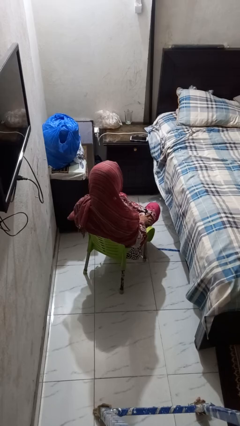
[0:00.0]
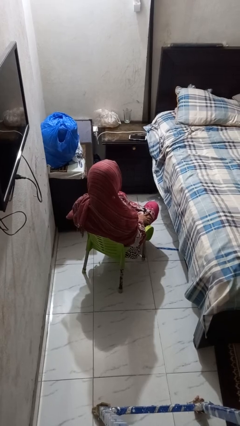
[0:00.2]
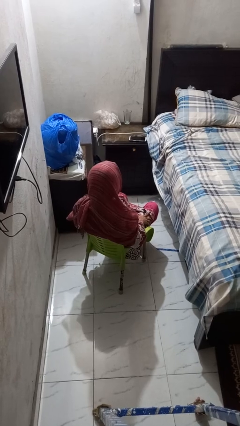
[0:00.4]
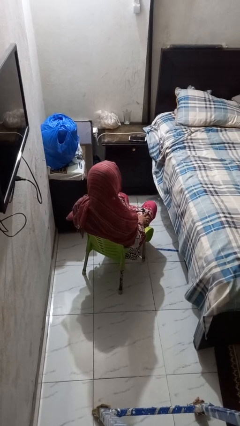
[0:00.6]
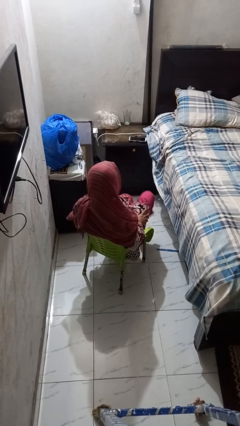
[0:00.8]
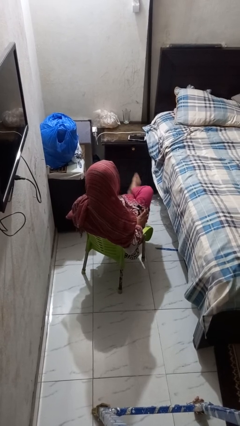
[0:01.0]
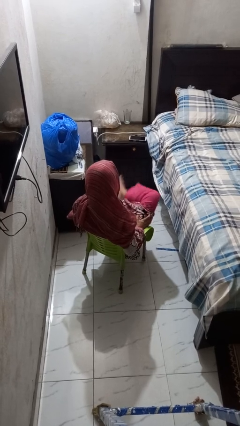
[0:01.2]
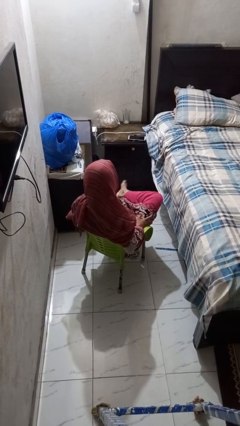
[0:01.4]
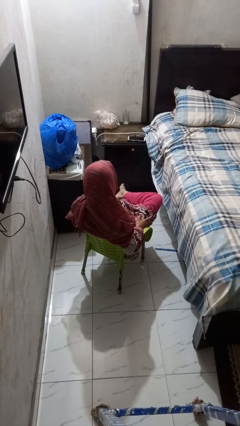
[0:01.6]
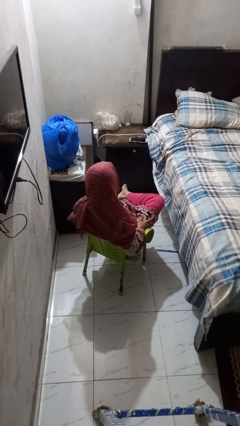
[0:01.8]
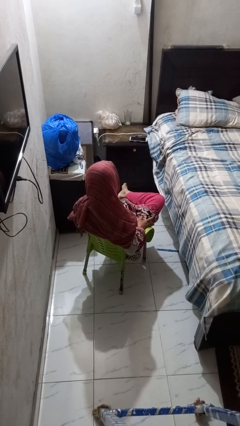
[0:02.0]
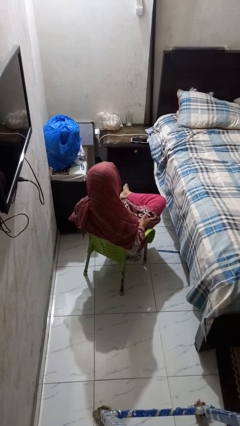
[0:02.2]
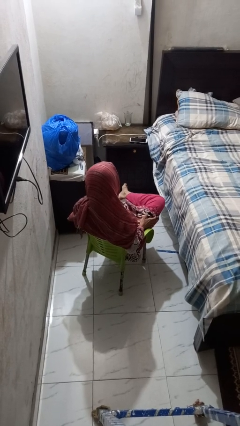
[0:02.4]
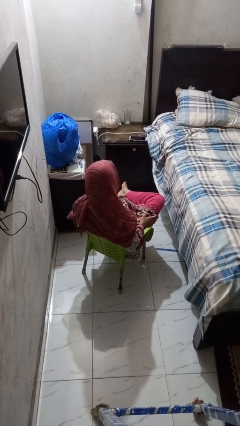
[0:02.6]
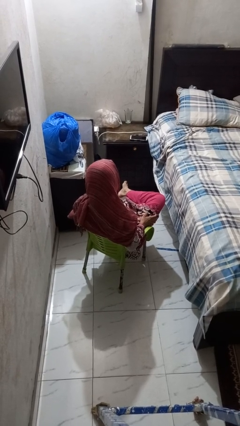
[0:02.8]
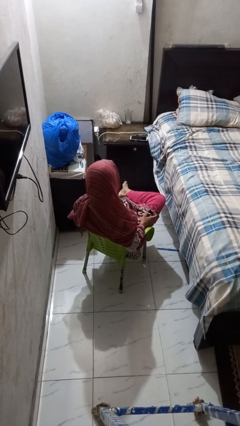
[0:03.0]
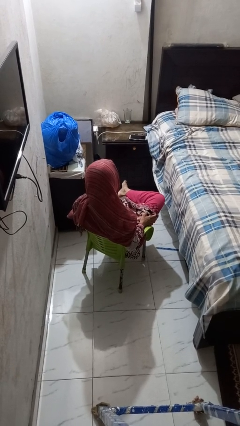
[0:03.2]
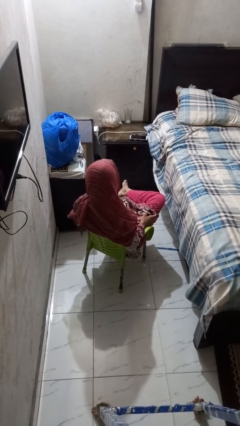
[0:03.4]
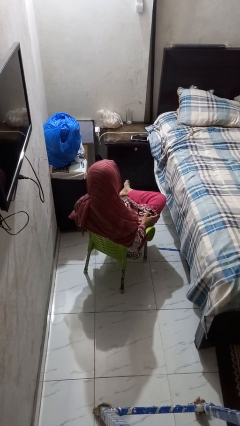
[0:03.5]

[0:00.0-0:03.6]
person crosses legs

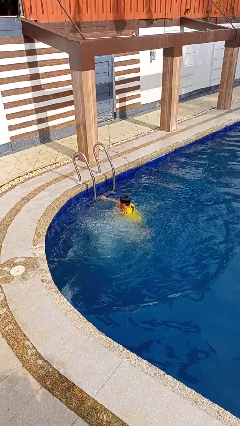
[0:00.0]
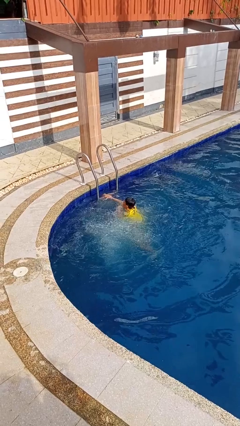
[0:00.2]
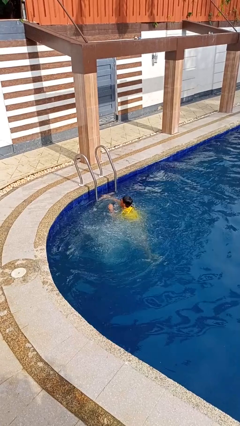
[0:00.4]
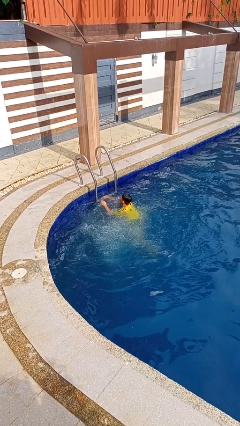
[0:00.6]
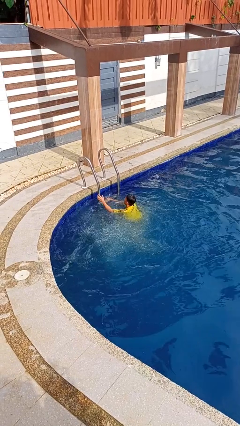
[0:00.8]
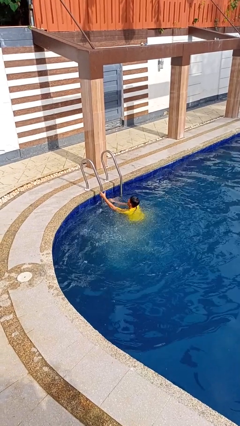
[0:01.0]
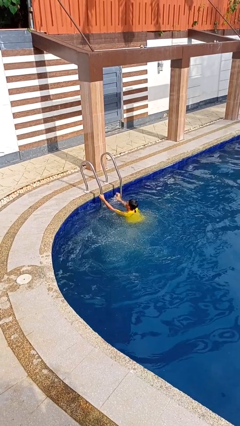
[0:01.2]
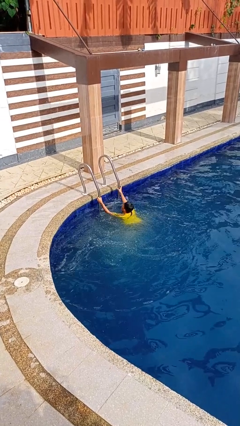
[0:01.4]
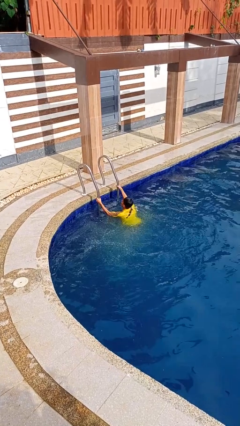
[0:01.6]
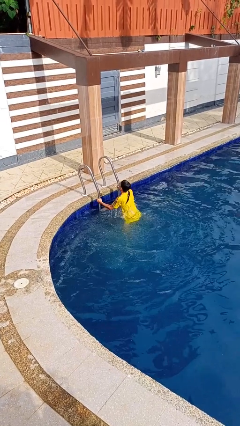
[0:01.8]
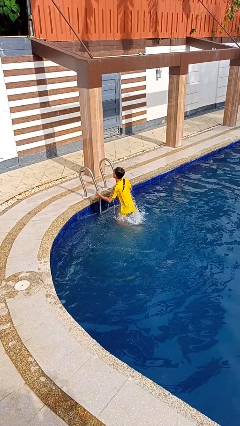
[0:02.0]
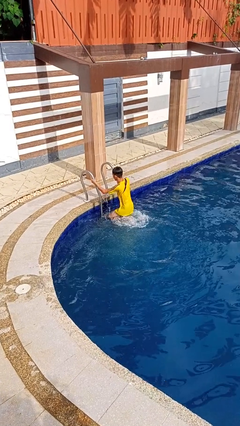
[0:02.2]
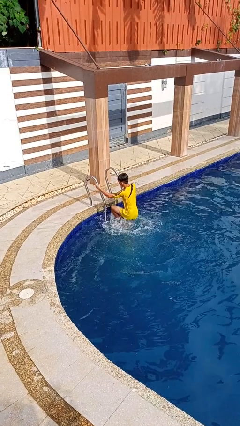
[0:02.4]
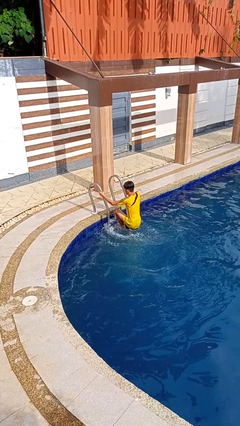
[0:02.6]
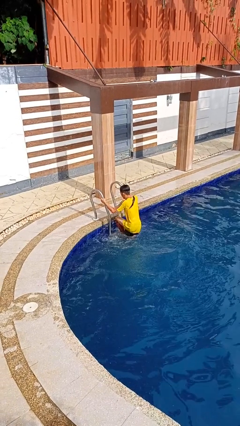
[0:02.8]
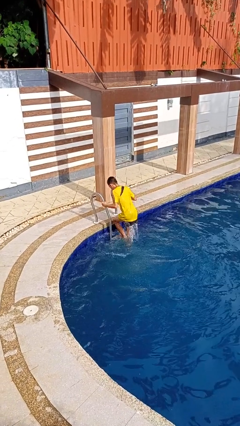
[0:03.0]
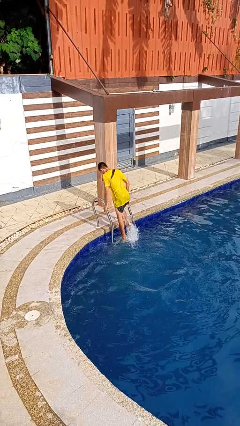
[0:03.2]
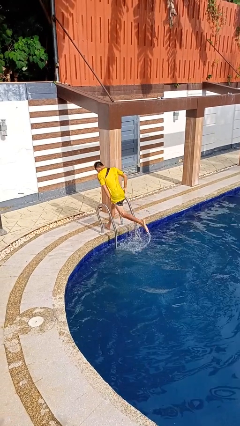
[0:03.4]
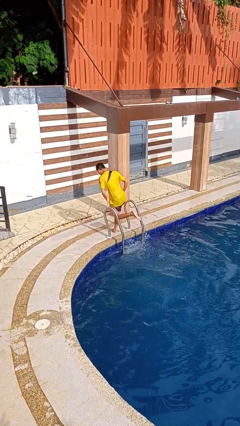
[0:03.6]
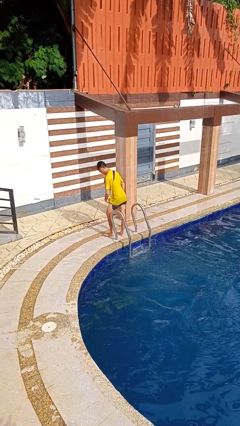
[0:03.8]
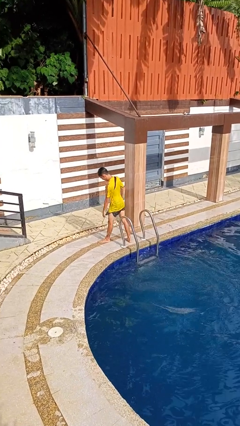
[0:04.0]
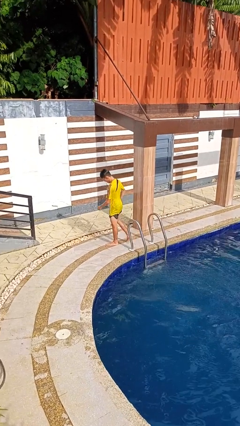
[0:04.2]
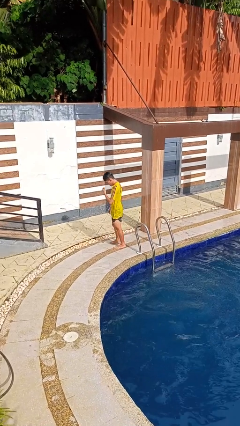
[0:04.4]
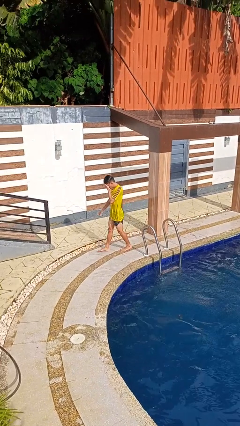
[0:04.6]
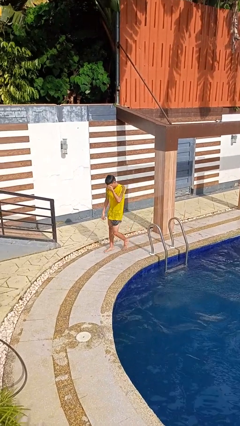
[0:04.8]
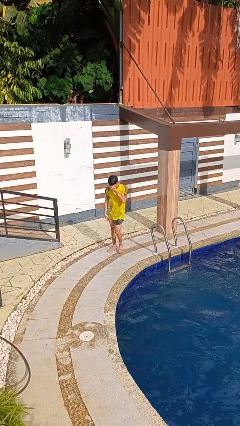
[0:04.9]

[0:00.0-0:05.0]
person exits pool

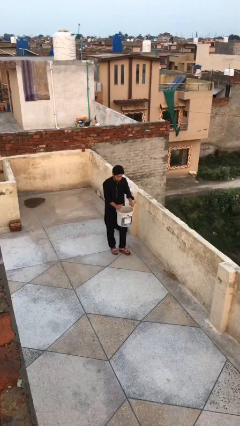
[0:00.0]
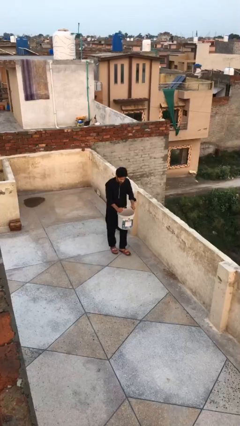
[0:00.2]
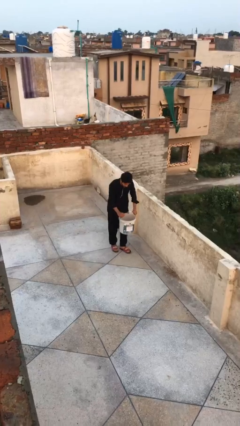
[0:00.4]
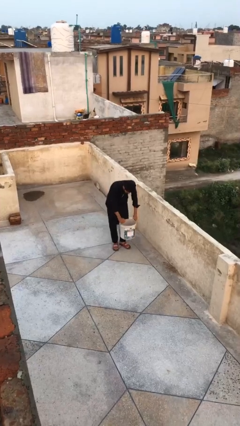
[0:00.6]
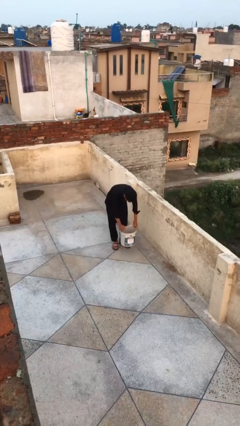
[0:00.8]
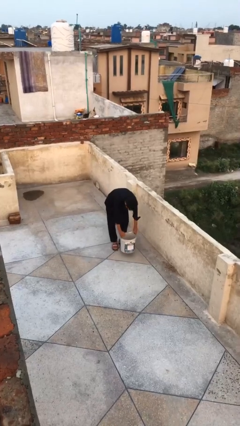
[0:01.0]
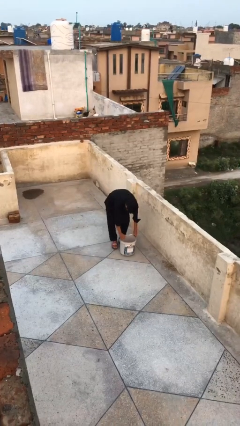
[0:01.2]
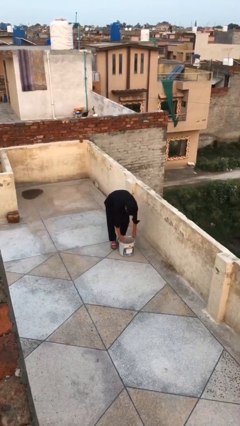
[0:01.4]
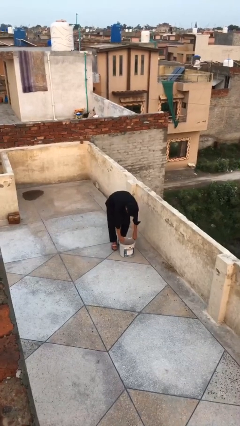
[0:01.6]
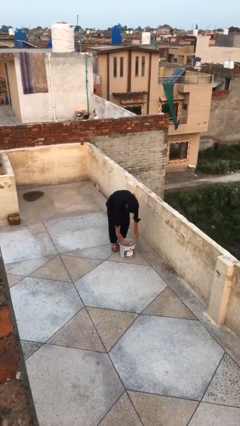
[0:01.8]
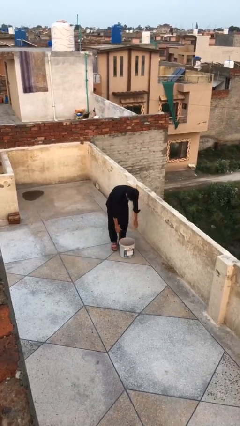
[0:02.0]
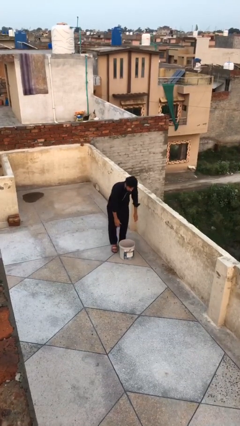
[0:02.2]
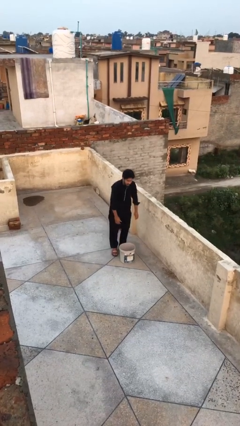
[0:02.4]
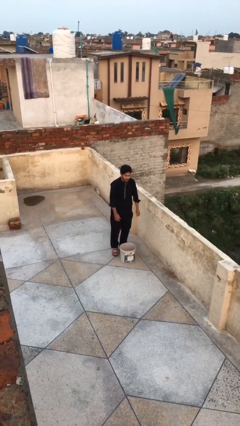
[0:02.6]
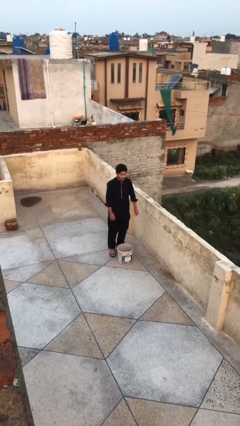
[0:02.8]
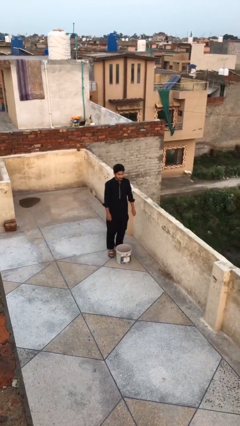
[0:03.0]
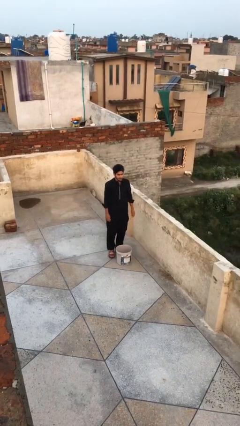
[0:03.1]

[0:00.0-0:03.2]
person puts down object on floor

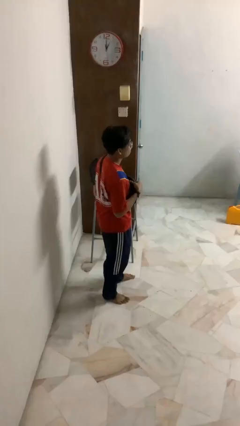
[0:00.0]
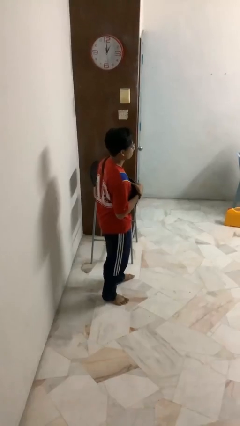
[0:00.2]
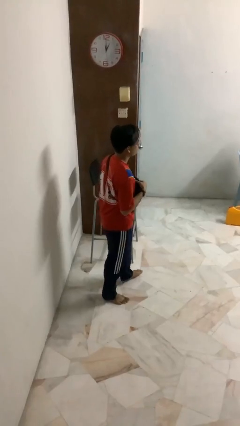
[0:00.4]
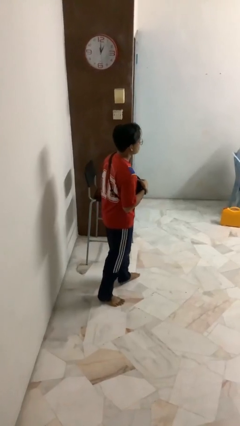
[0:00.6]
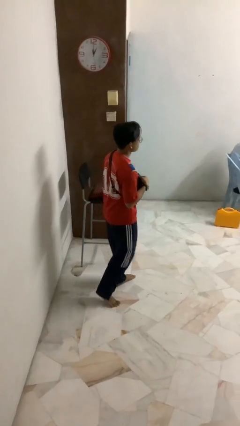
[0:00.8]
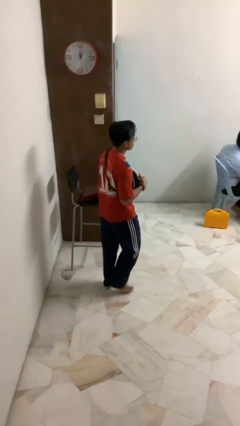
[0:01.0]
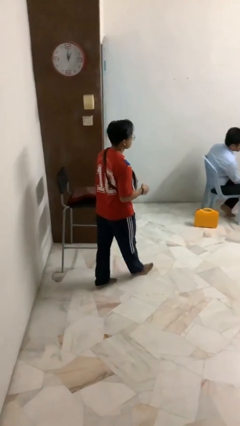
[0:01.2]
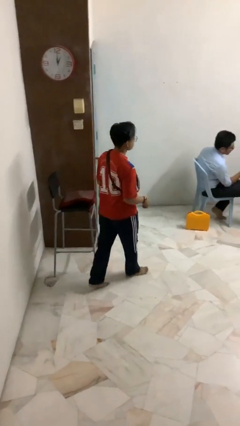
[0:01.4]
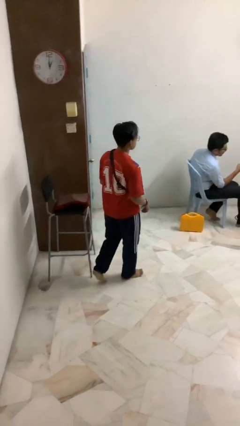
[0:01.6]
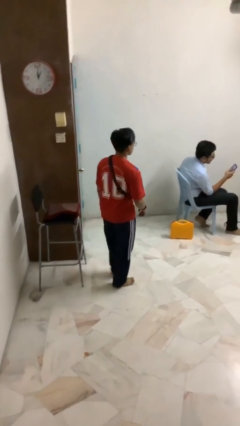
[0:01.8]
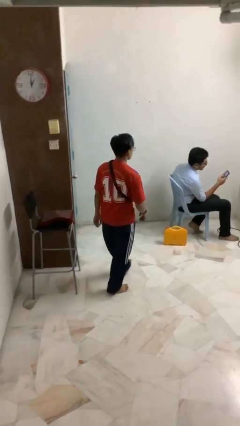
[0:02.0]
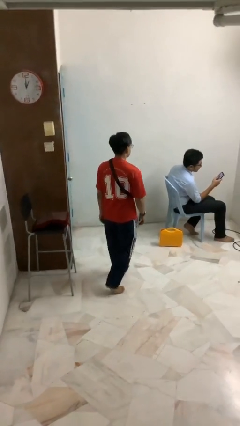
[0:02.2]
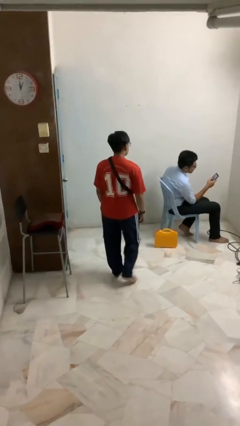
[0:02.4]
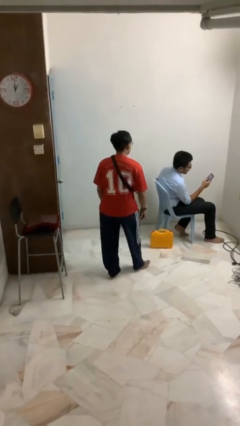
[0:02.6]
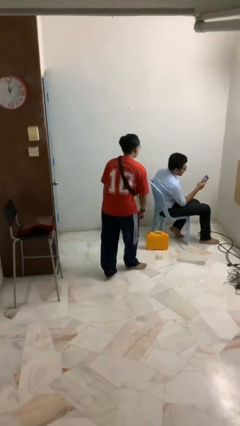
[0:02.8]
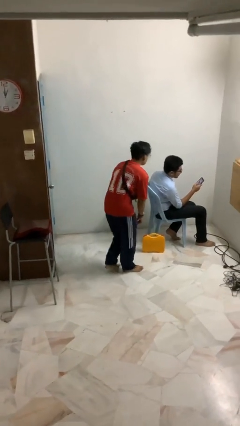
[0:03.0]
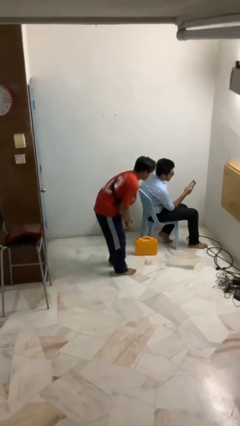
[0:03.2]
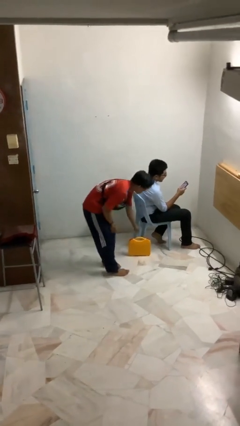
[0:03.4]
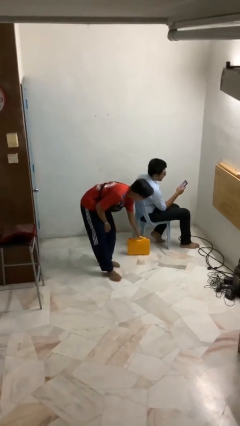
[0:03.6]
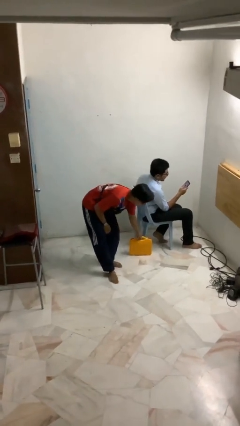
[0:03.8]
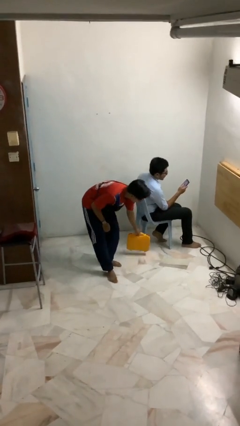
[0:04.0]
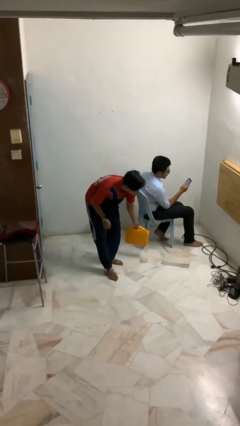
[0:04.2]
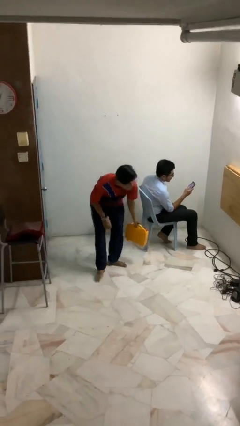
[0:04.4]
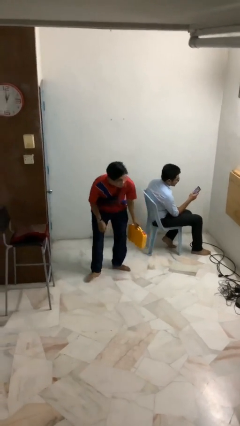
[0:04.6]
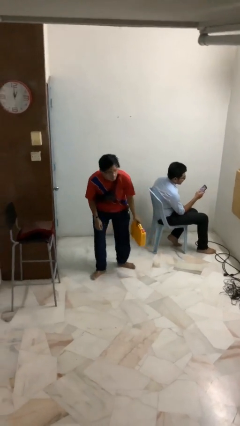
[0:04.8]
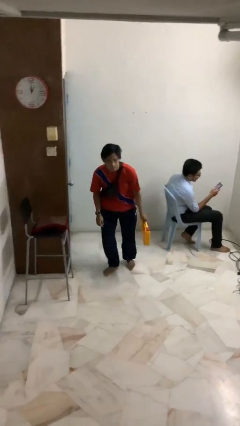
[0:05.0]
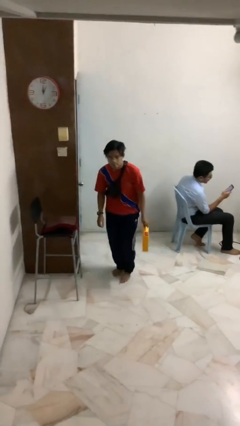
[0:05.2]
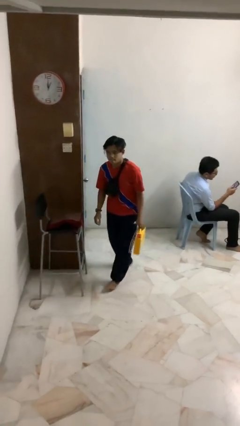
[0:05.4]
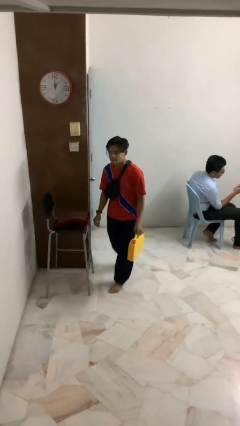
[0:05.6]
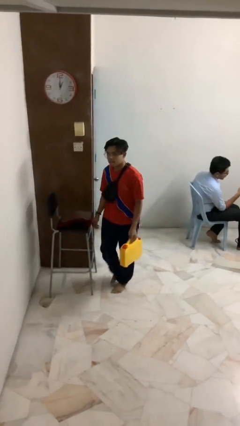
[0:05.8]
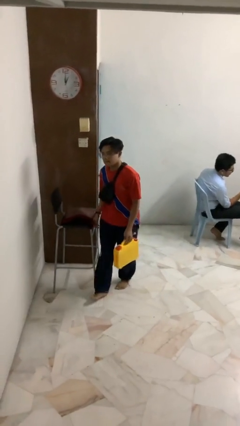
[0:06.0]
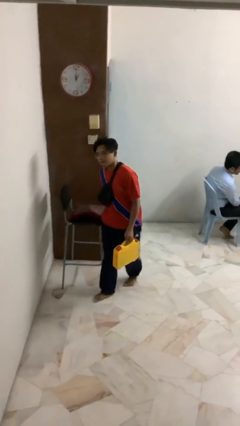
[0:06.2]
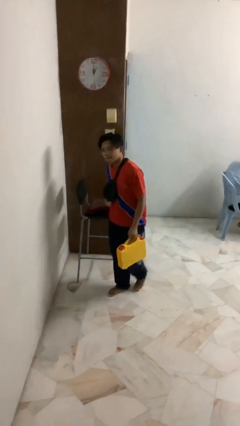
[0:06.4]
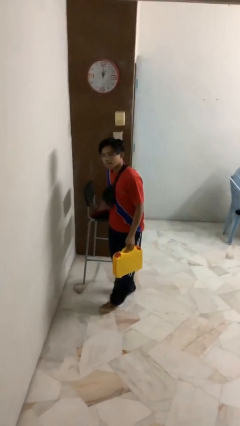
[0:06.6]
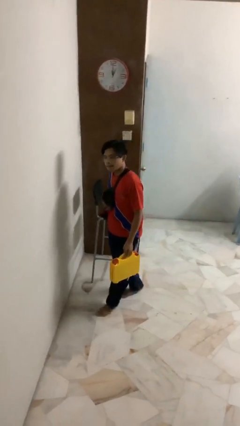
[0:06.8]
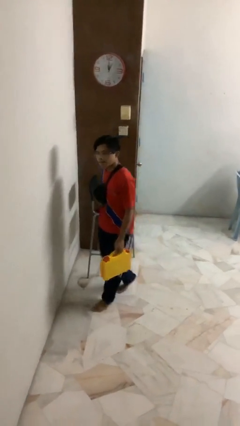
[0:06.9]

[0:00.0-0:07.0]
person steals object from person
